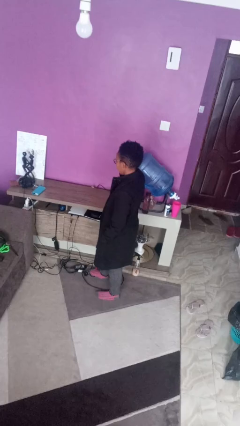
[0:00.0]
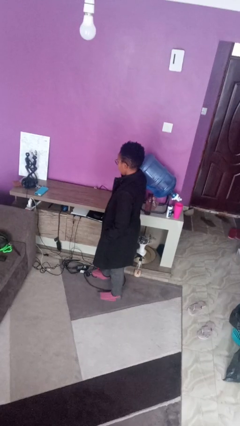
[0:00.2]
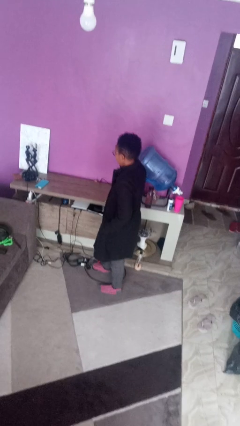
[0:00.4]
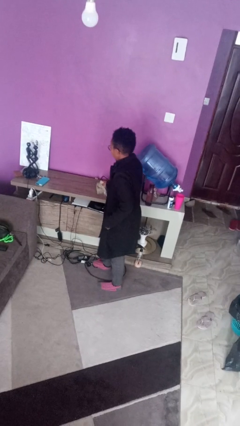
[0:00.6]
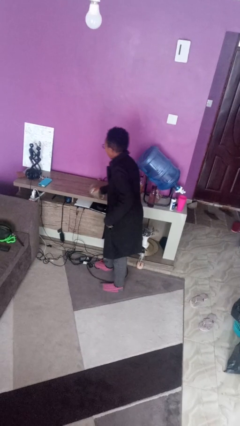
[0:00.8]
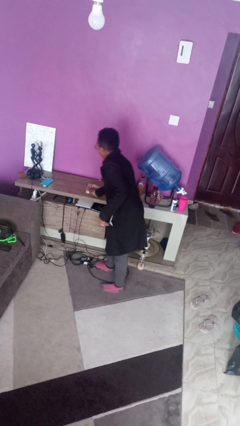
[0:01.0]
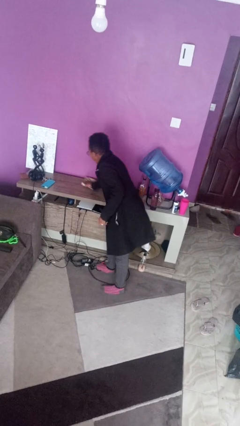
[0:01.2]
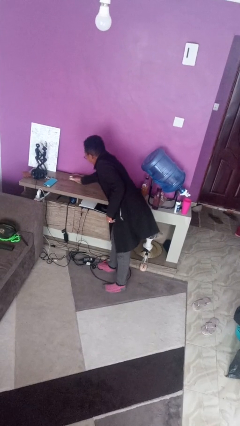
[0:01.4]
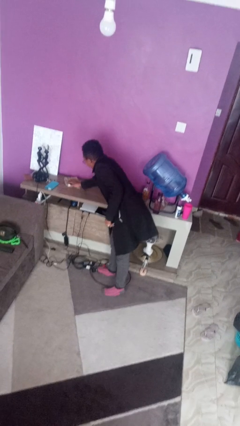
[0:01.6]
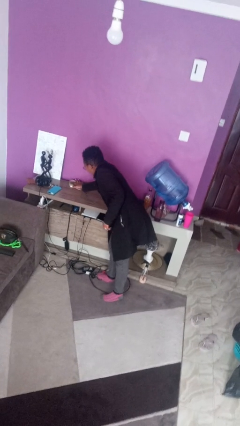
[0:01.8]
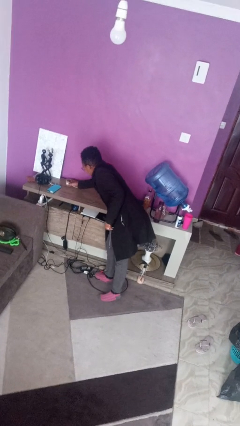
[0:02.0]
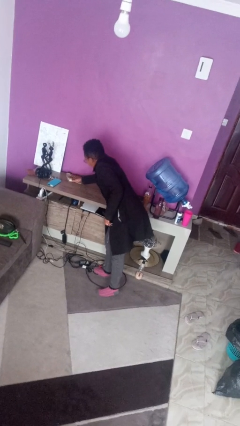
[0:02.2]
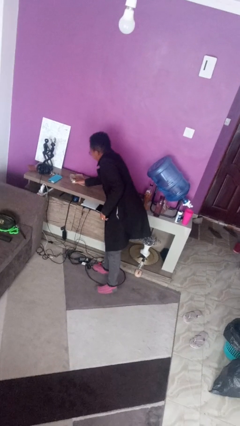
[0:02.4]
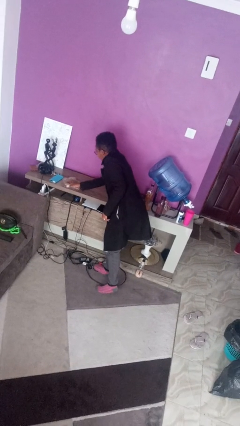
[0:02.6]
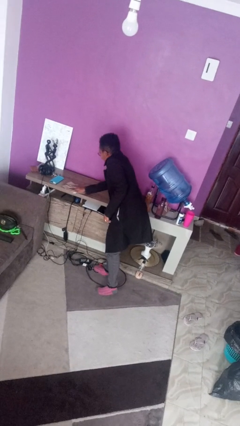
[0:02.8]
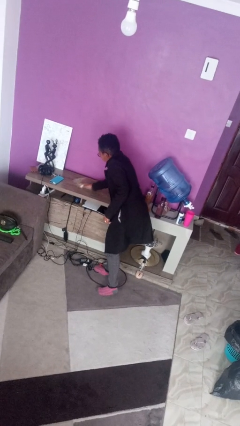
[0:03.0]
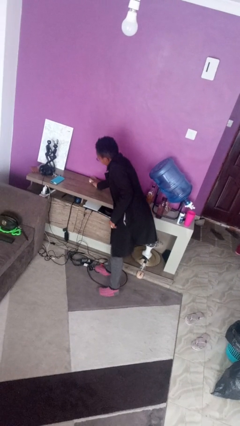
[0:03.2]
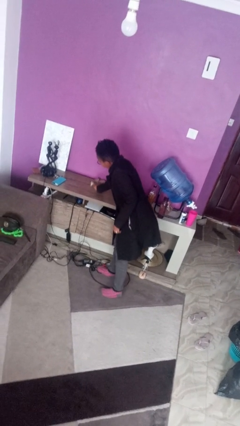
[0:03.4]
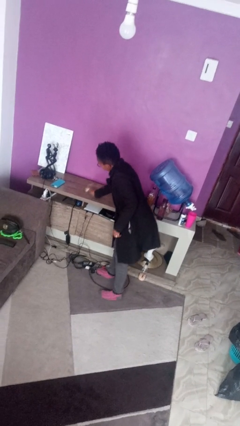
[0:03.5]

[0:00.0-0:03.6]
person cleans table with rag

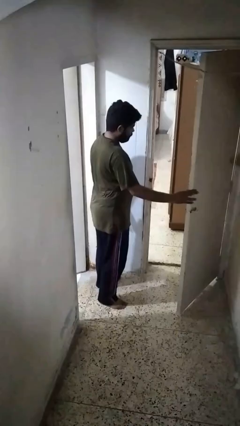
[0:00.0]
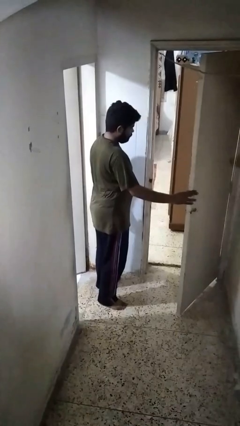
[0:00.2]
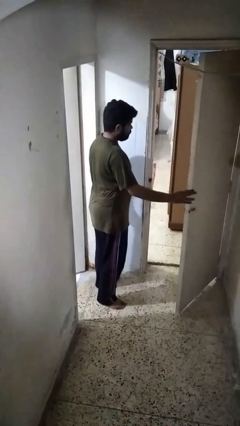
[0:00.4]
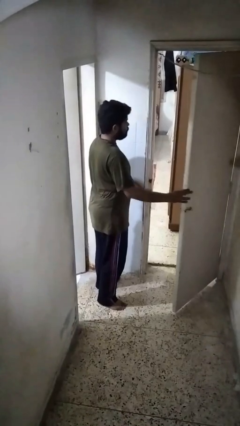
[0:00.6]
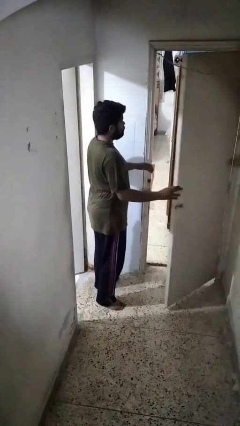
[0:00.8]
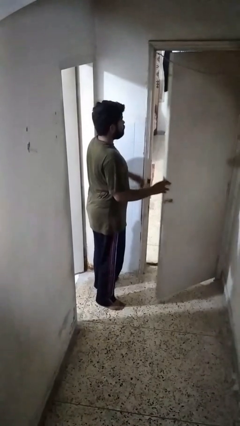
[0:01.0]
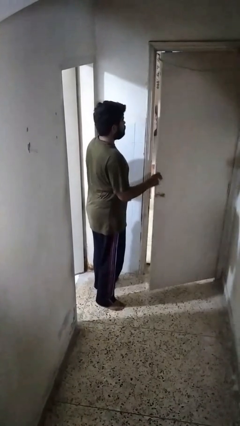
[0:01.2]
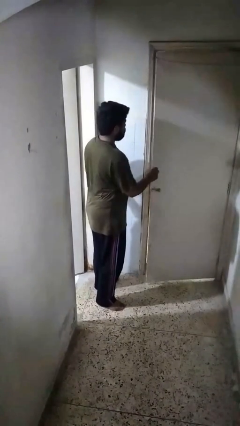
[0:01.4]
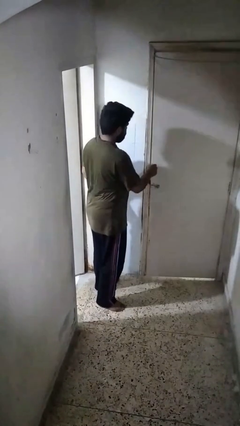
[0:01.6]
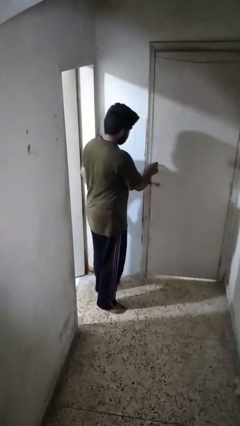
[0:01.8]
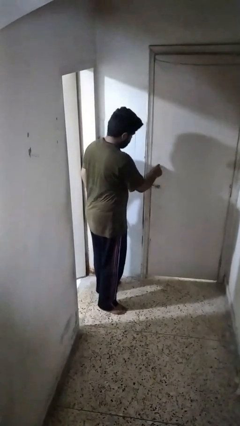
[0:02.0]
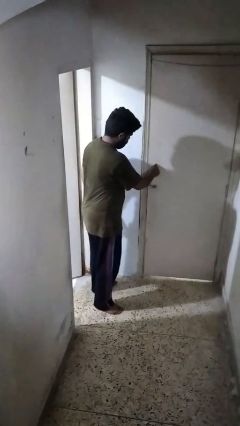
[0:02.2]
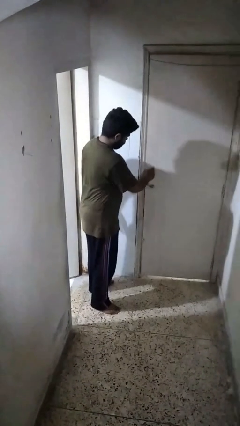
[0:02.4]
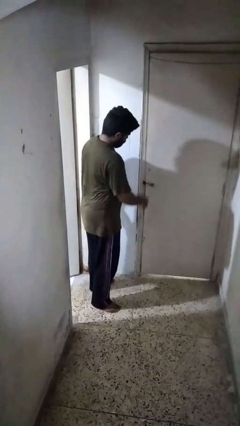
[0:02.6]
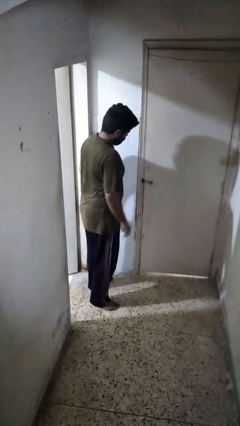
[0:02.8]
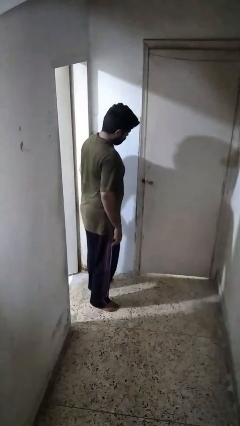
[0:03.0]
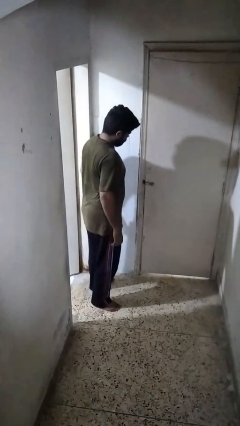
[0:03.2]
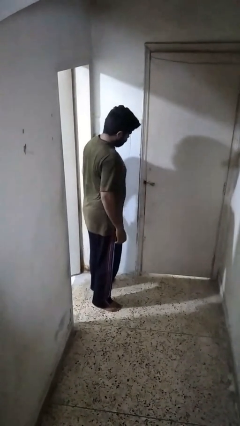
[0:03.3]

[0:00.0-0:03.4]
person closes facility door

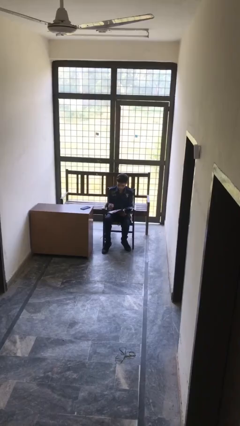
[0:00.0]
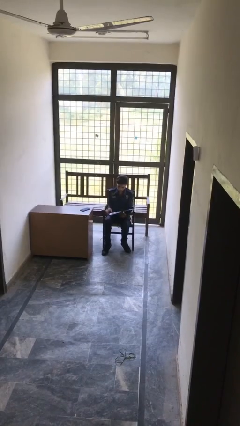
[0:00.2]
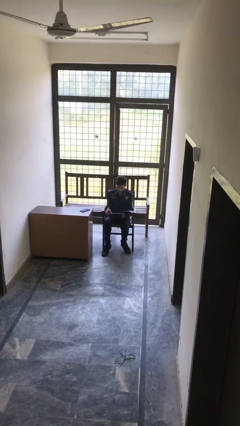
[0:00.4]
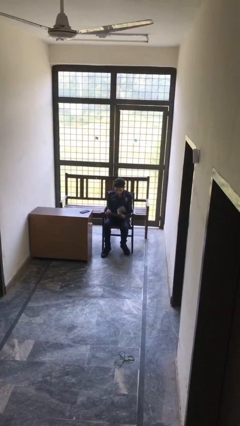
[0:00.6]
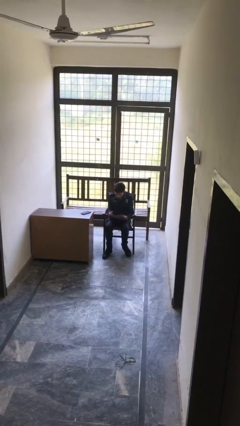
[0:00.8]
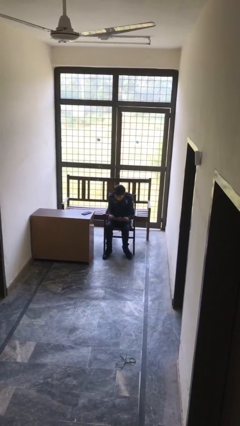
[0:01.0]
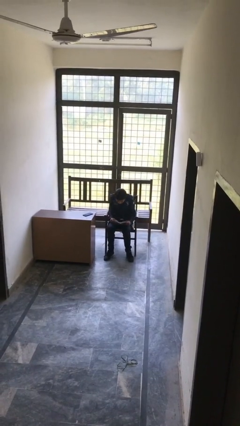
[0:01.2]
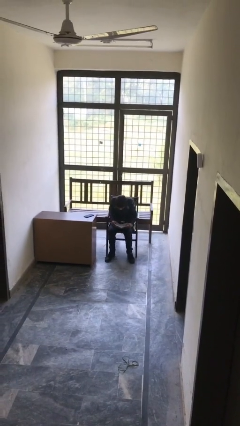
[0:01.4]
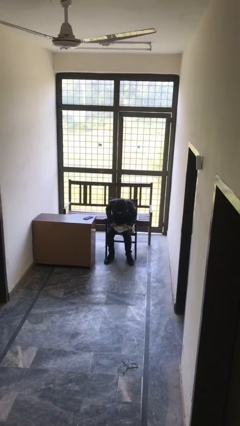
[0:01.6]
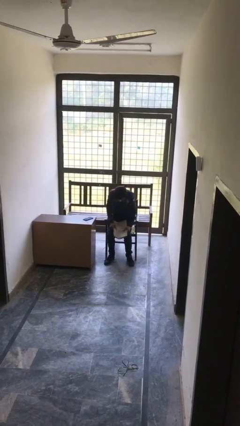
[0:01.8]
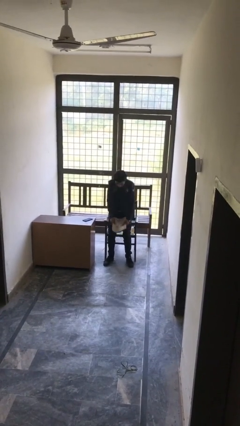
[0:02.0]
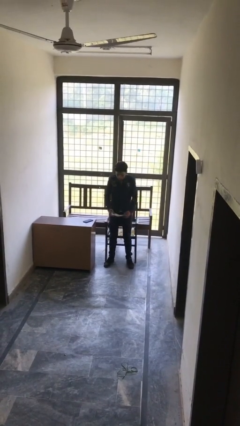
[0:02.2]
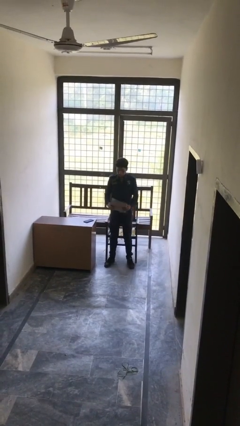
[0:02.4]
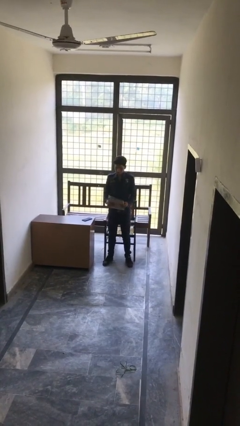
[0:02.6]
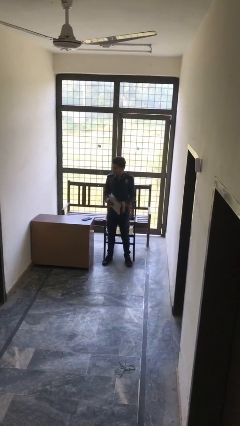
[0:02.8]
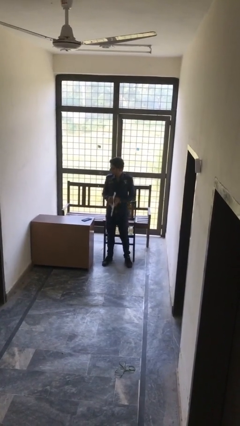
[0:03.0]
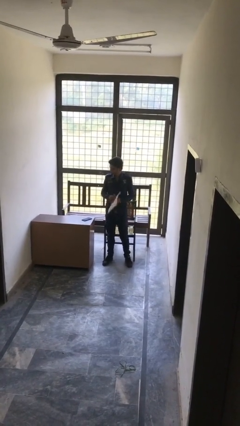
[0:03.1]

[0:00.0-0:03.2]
person stands up

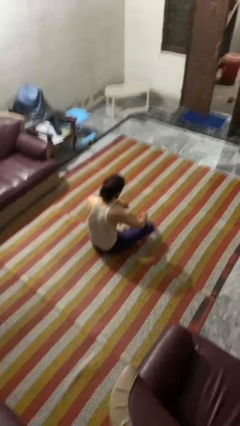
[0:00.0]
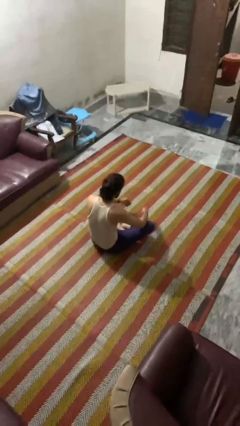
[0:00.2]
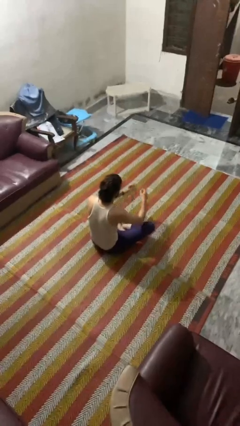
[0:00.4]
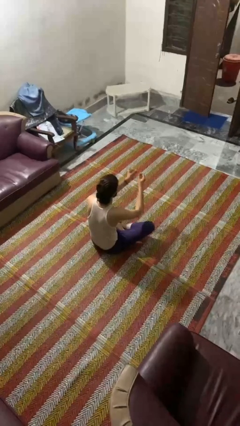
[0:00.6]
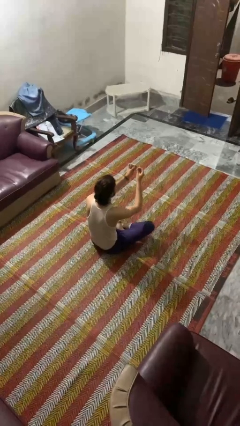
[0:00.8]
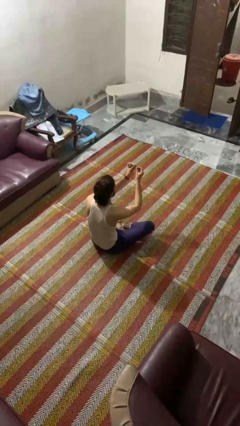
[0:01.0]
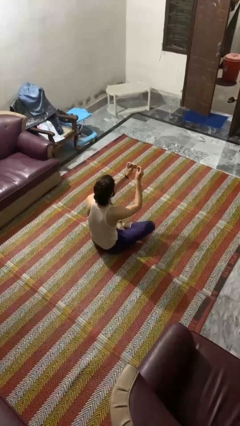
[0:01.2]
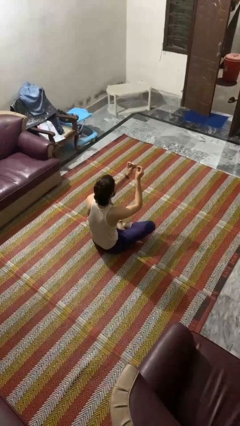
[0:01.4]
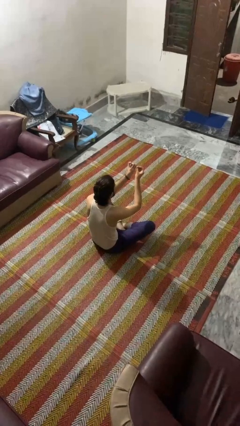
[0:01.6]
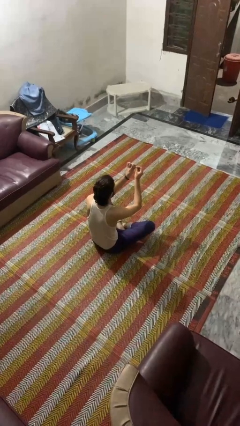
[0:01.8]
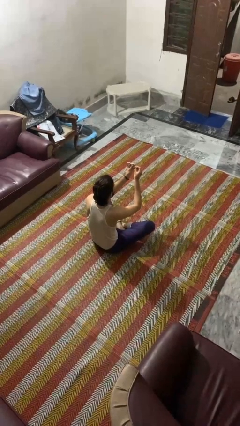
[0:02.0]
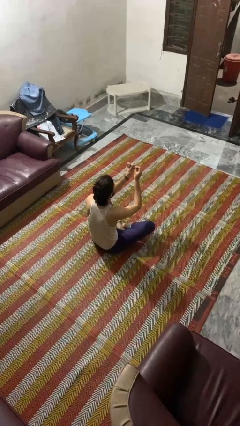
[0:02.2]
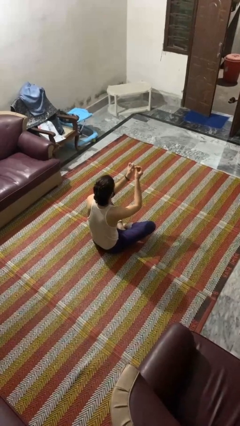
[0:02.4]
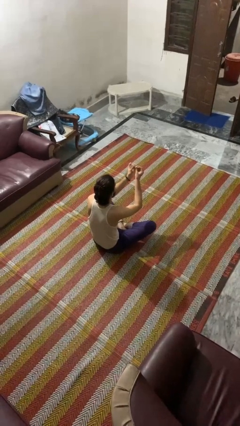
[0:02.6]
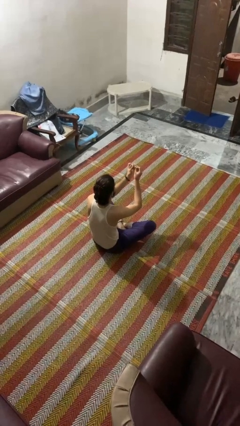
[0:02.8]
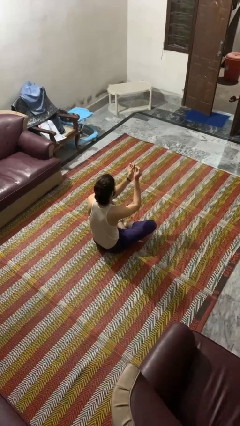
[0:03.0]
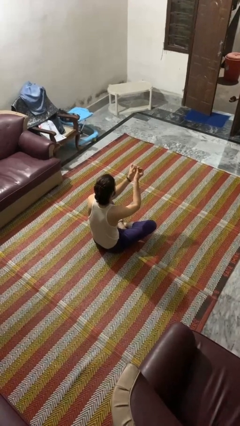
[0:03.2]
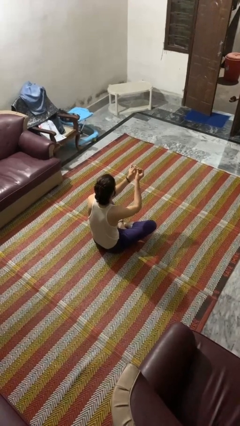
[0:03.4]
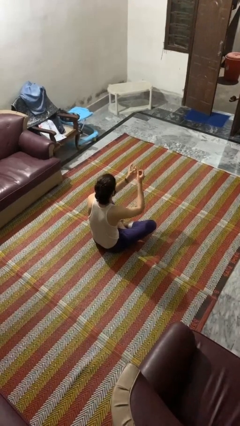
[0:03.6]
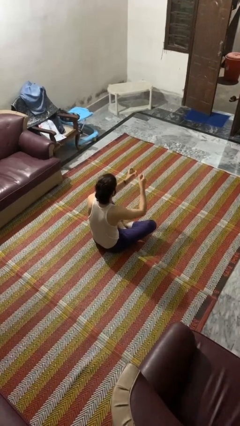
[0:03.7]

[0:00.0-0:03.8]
person clips fingernails

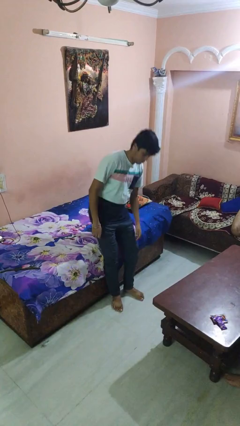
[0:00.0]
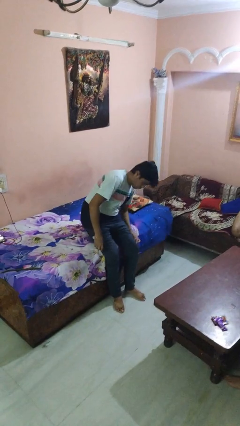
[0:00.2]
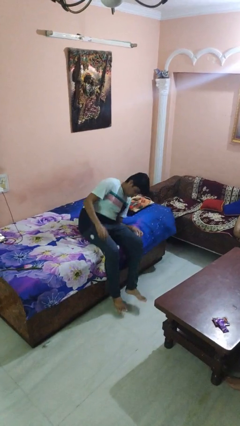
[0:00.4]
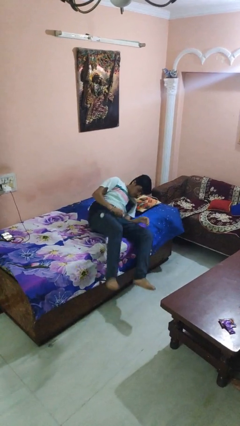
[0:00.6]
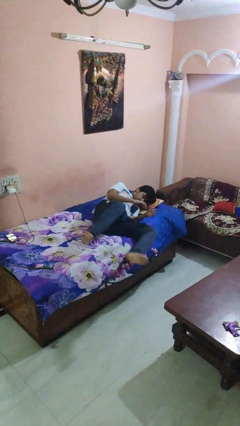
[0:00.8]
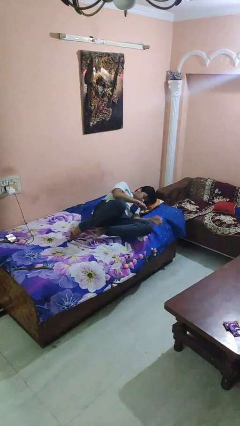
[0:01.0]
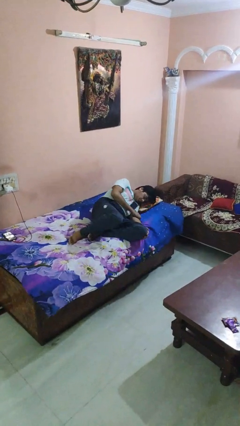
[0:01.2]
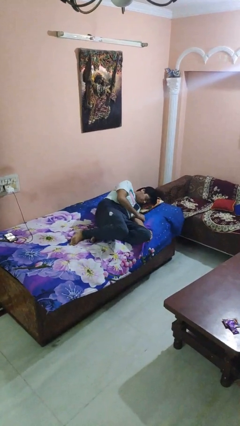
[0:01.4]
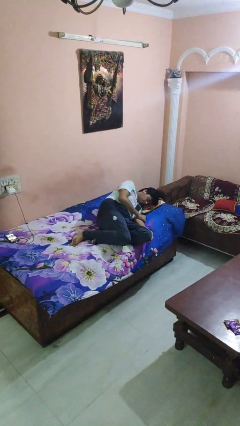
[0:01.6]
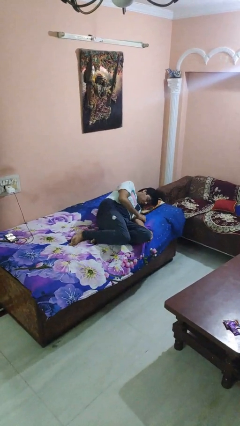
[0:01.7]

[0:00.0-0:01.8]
person lies down on bed

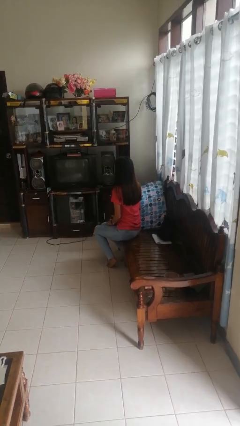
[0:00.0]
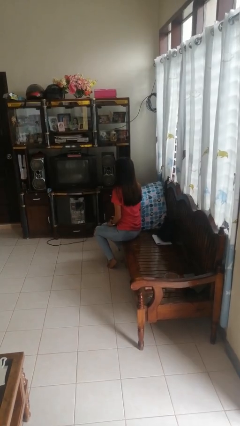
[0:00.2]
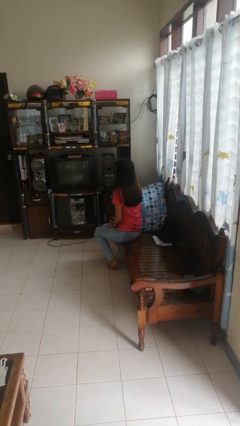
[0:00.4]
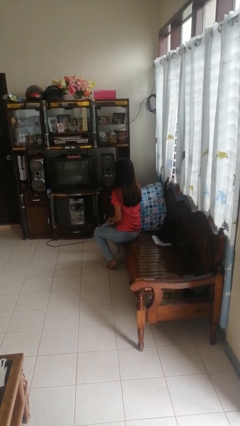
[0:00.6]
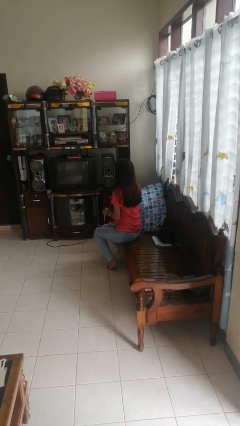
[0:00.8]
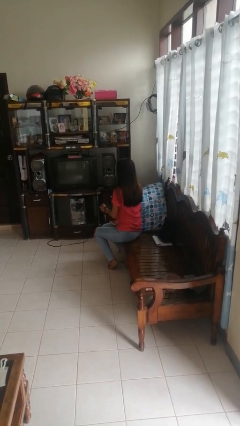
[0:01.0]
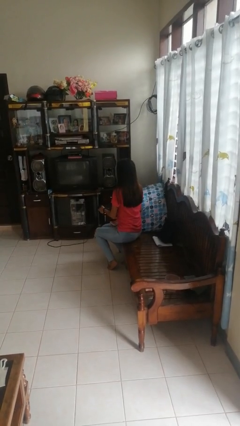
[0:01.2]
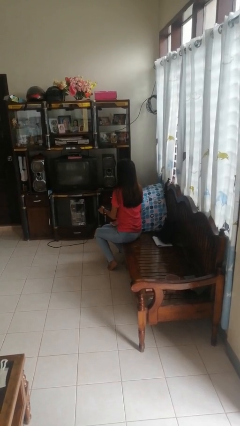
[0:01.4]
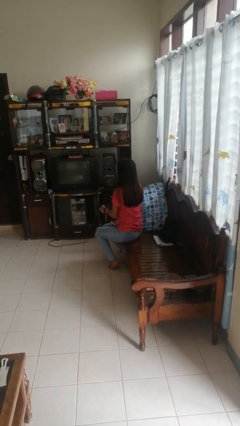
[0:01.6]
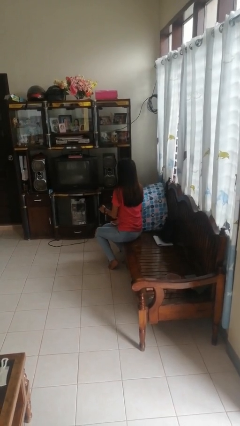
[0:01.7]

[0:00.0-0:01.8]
person uses television remote
